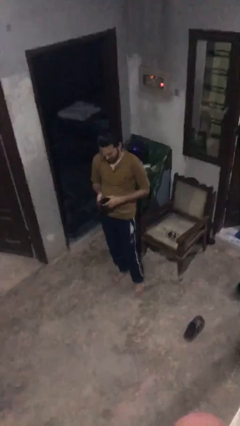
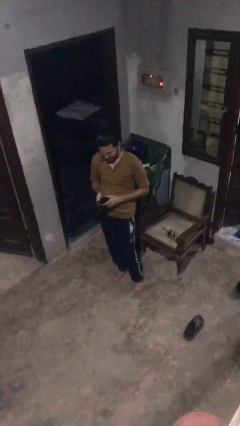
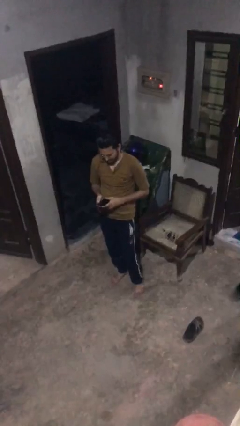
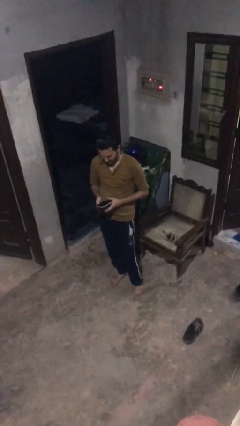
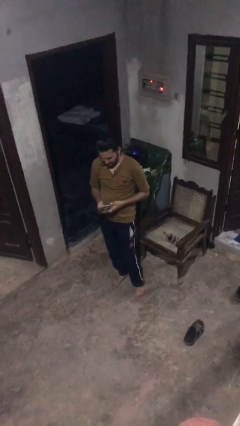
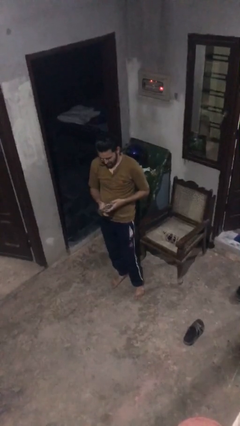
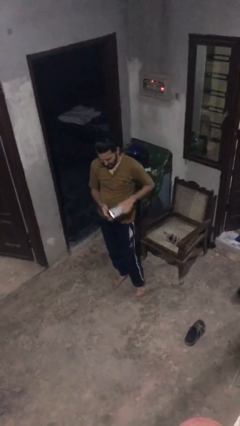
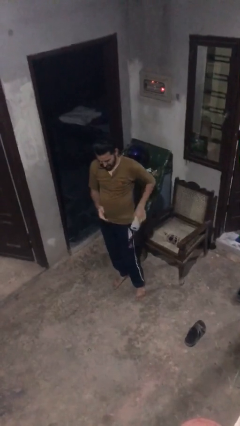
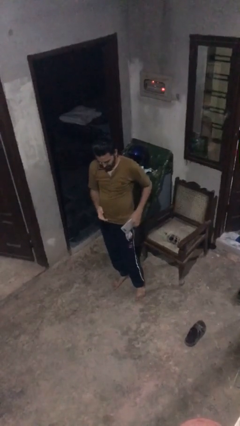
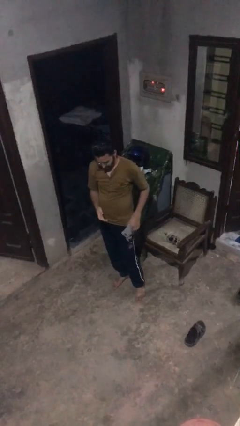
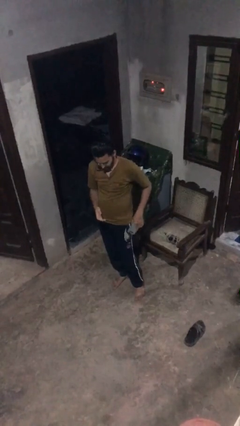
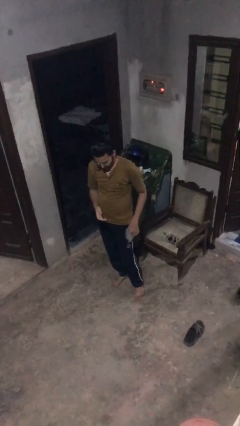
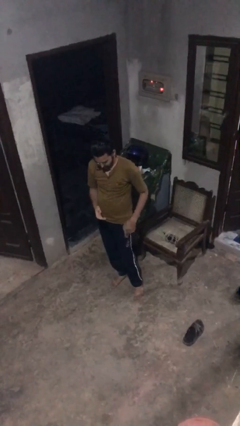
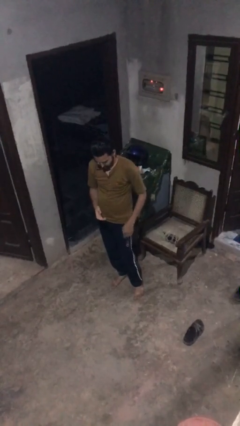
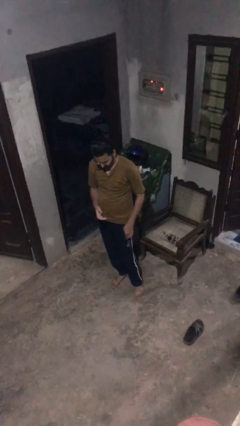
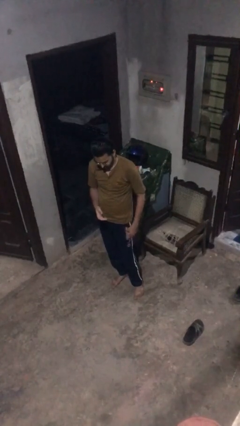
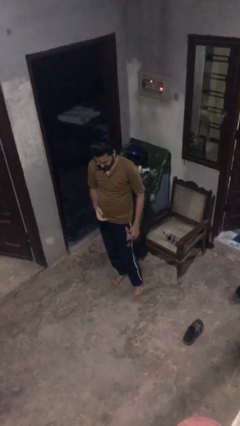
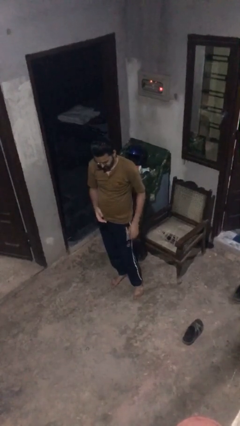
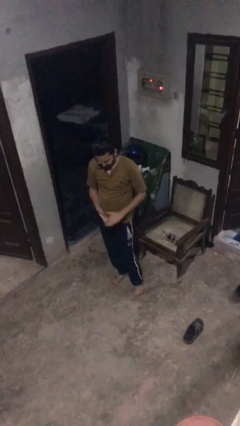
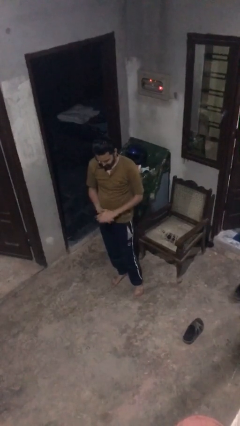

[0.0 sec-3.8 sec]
person puts phone into pocket

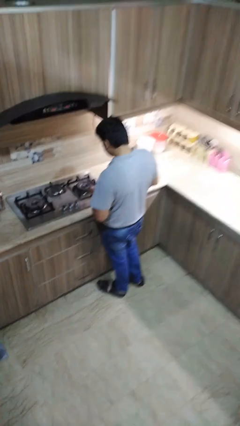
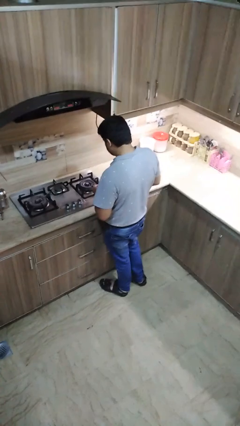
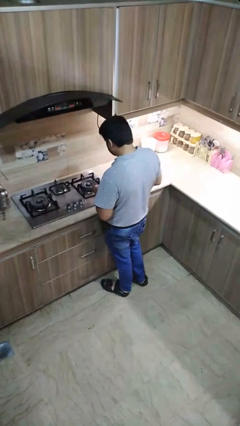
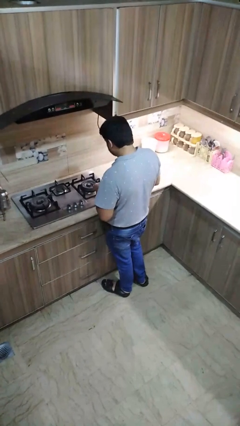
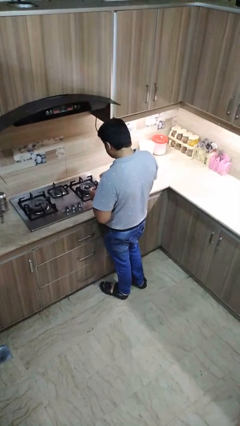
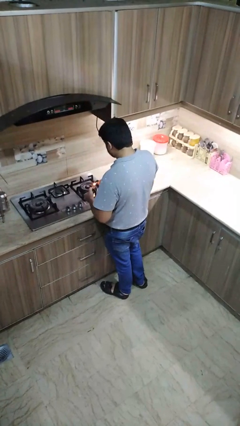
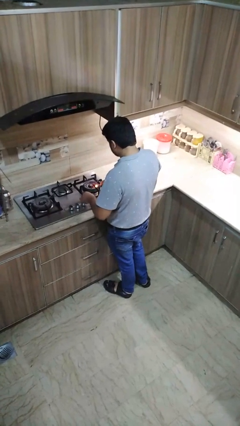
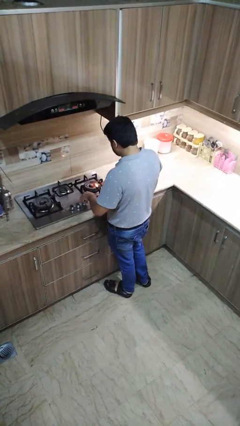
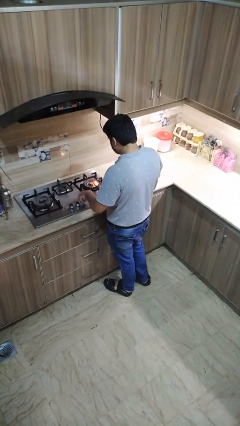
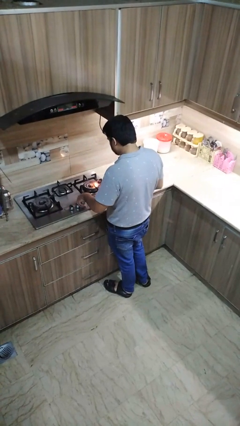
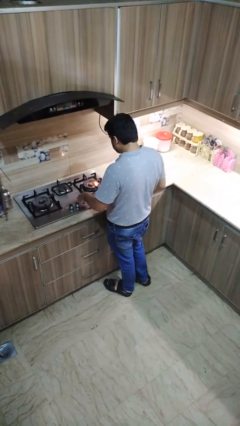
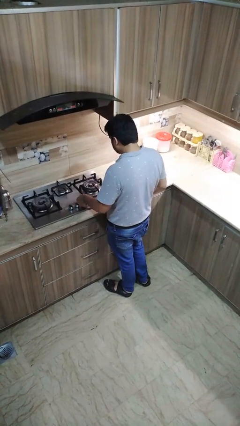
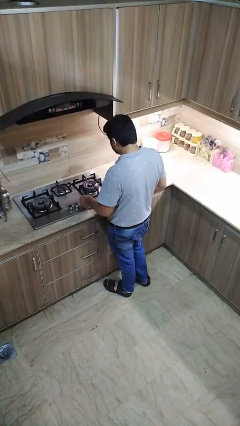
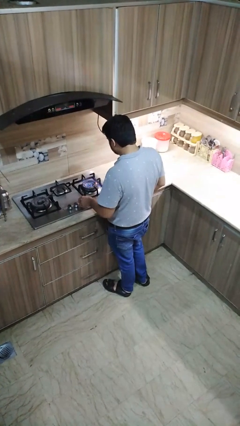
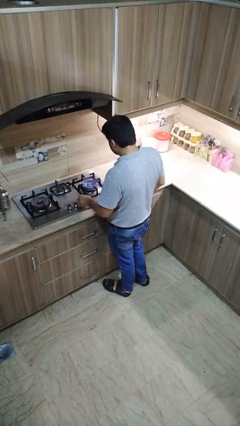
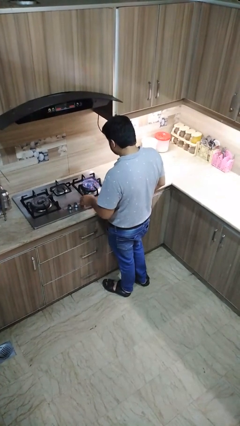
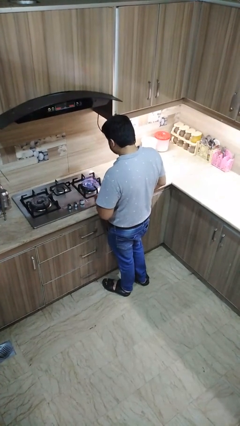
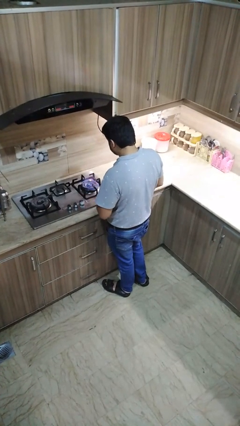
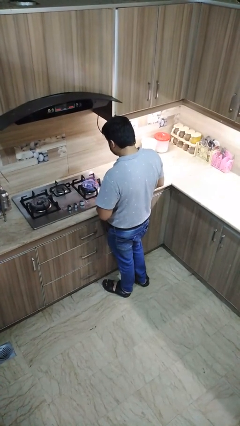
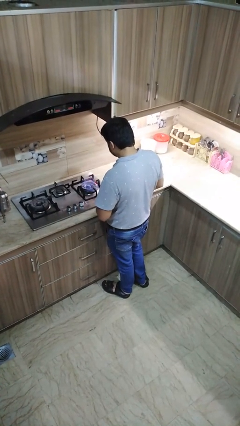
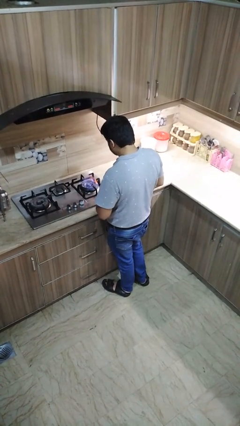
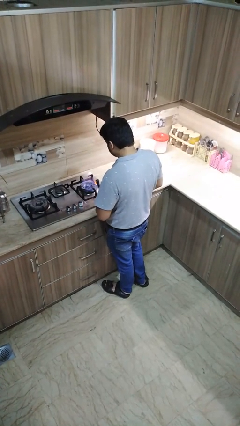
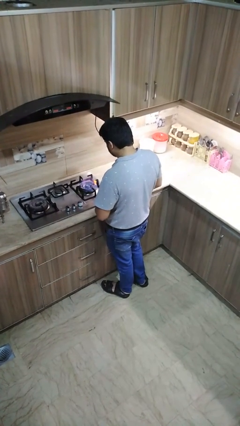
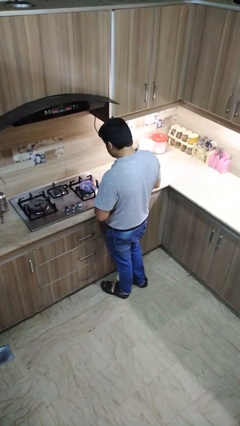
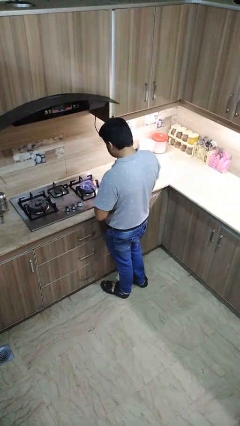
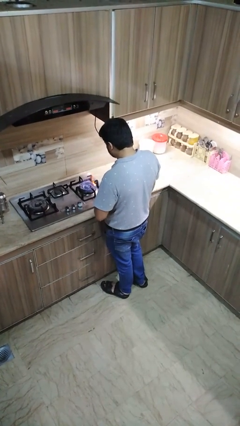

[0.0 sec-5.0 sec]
person turns on stovetop

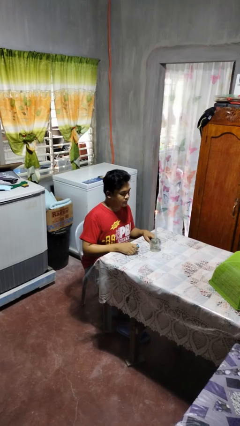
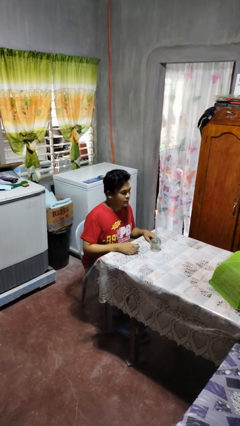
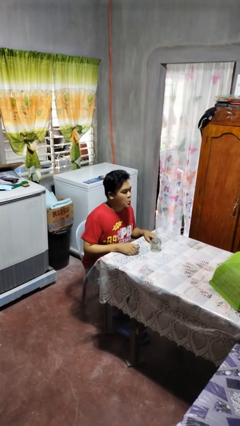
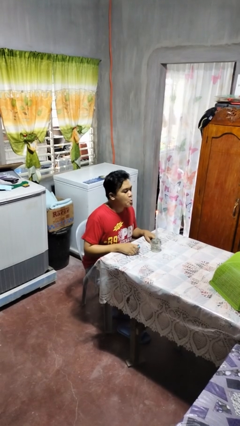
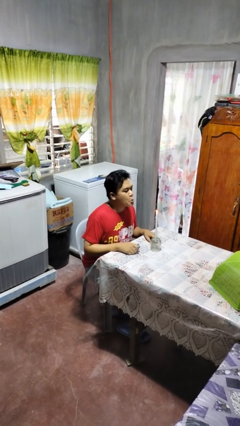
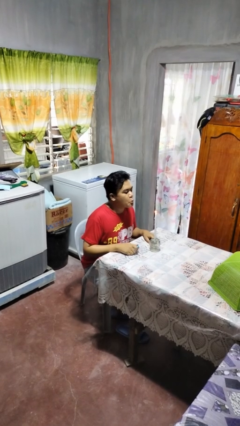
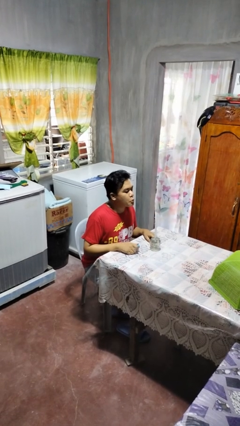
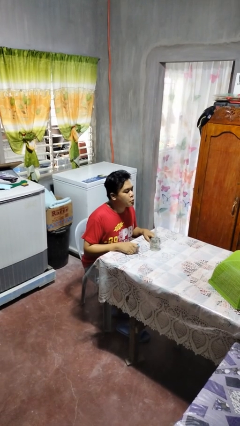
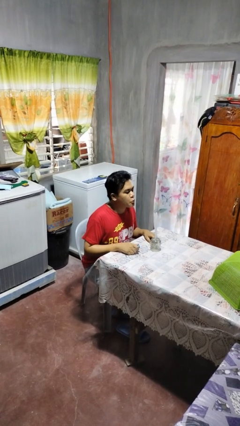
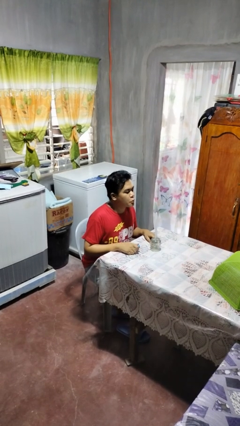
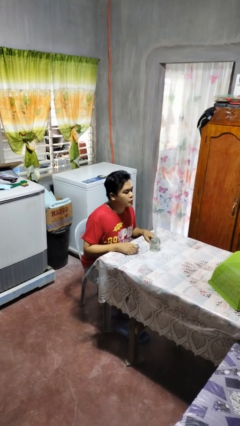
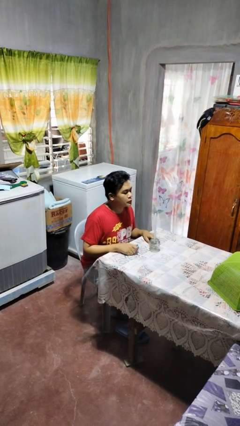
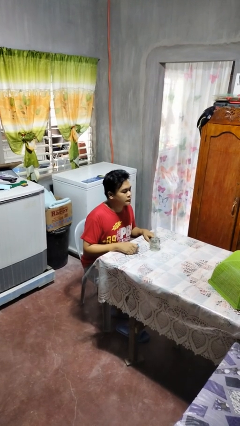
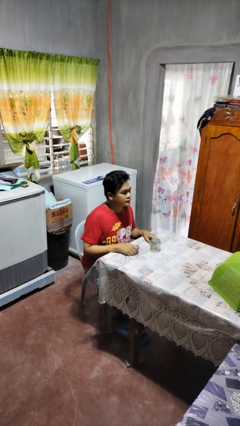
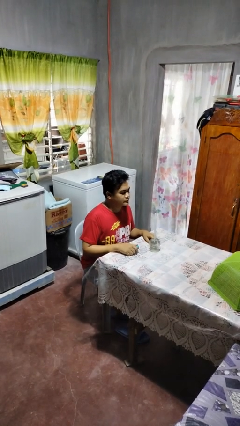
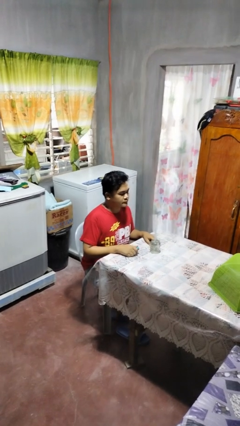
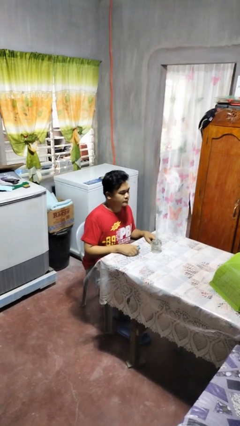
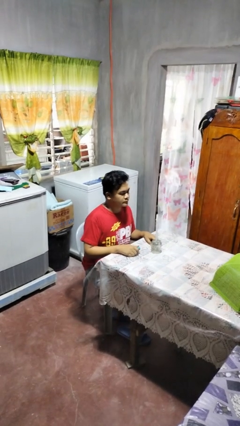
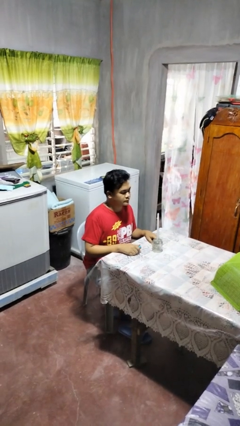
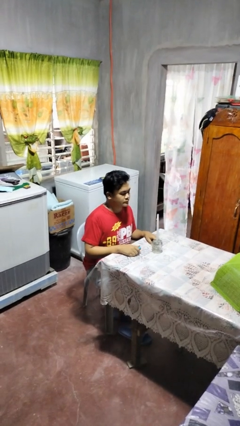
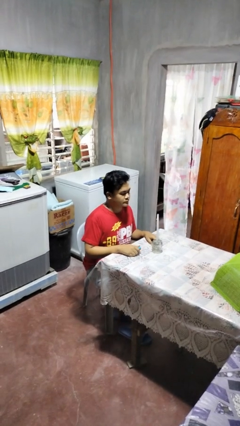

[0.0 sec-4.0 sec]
person extinguishes candle

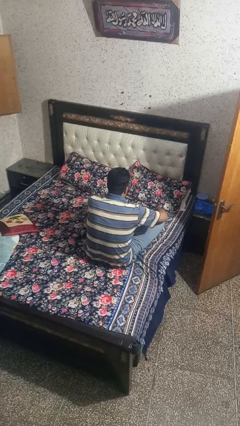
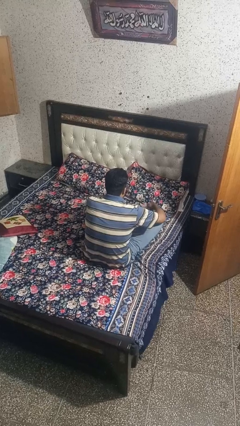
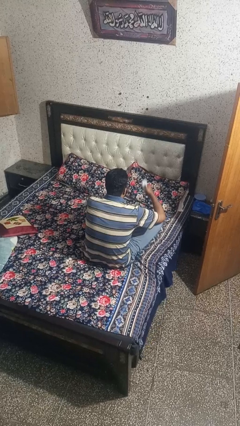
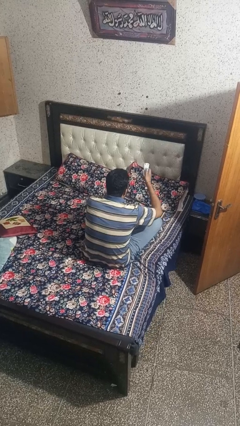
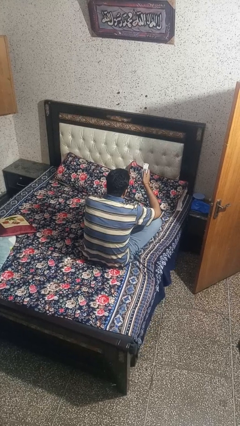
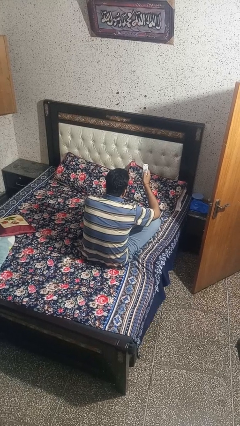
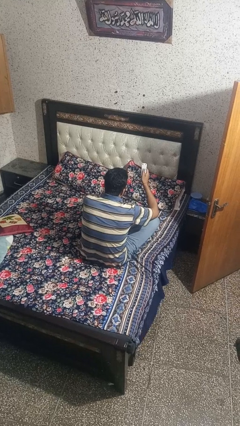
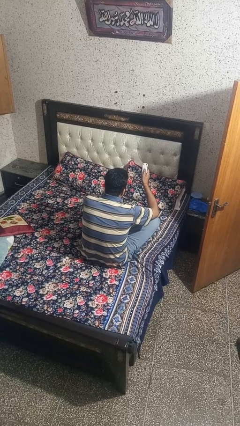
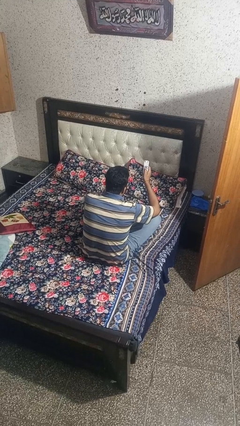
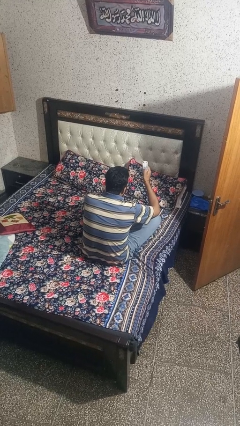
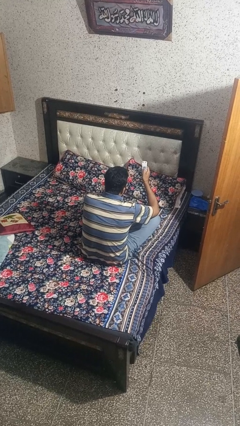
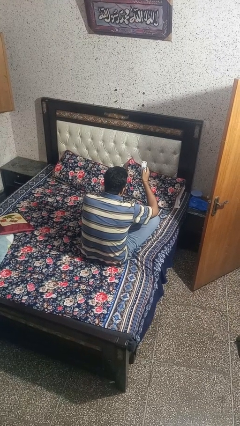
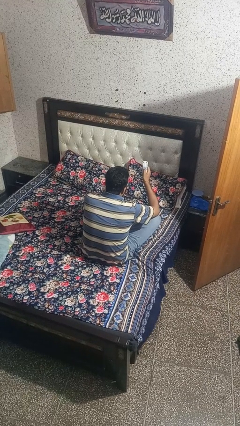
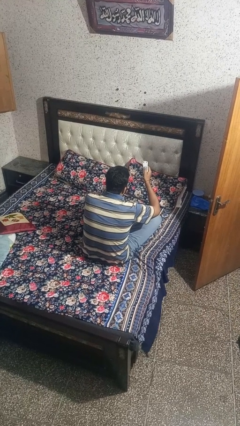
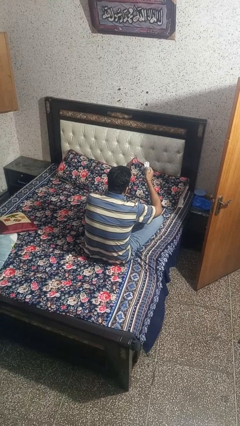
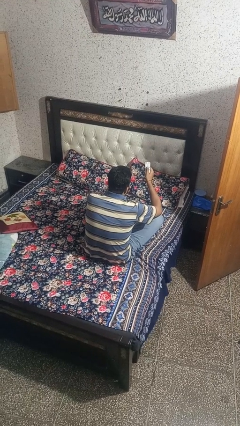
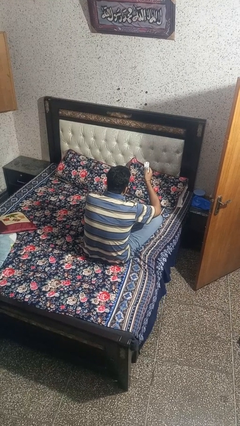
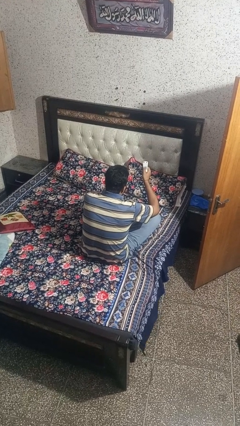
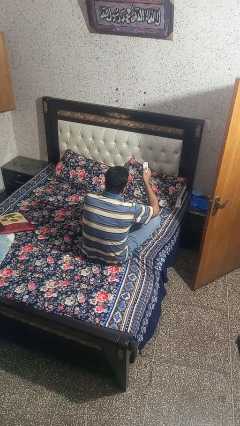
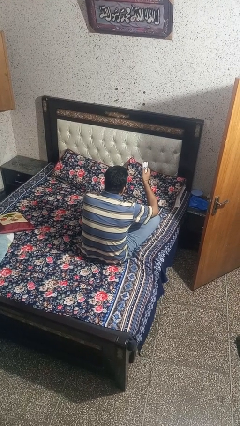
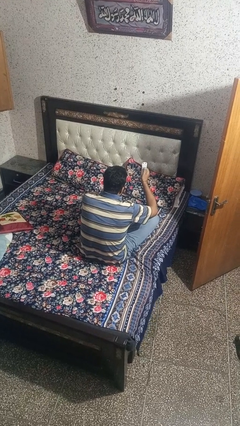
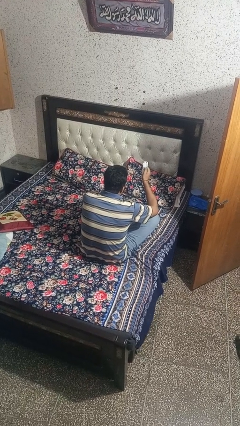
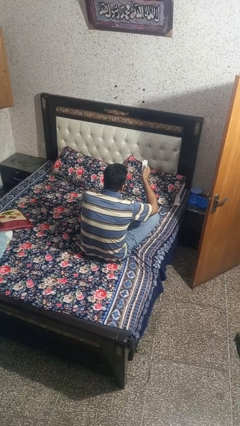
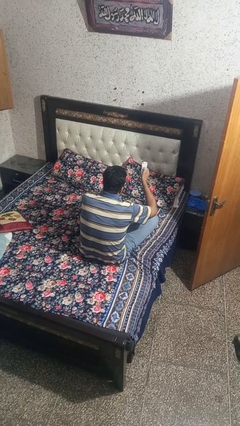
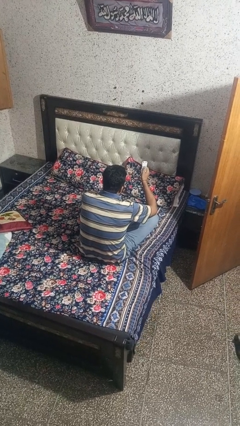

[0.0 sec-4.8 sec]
person uses television remote

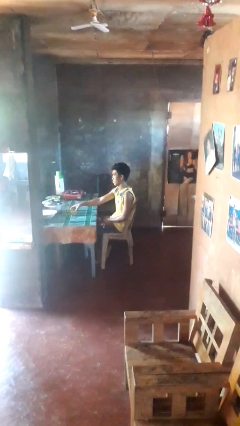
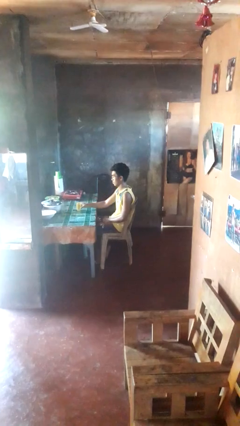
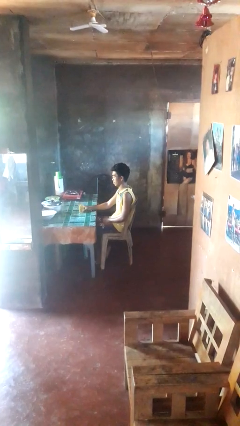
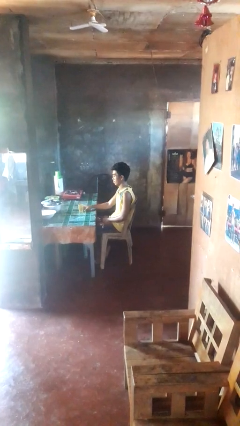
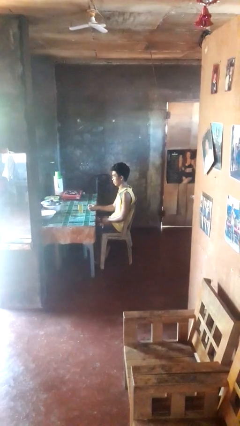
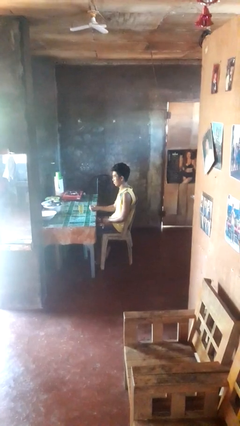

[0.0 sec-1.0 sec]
person sets upright glass
